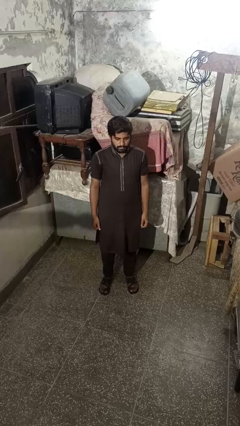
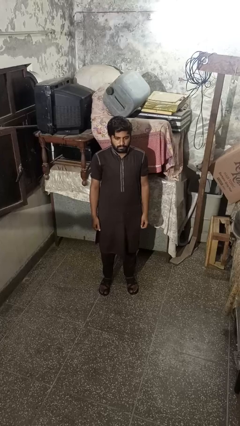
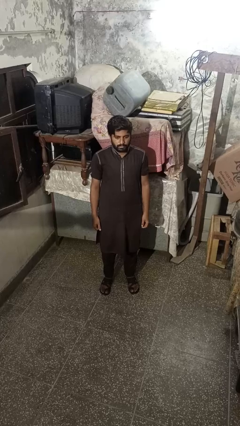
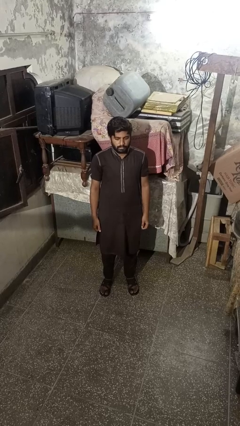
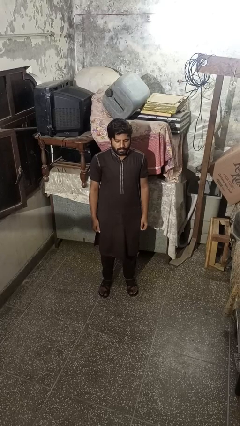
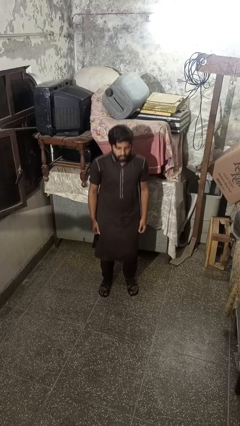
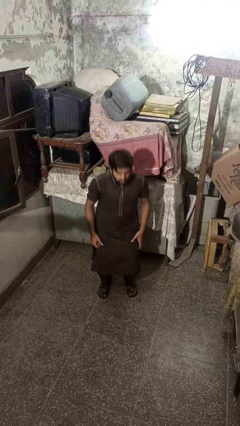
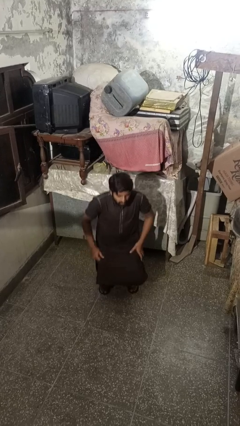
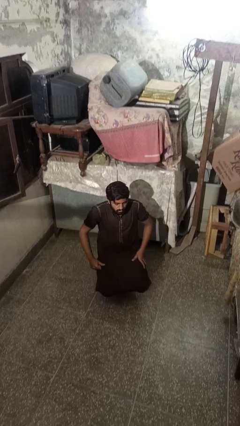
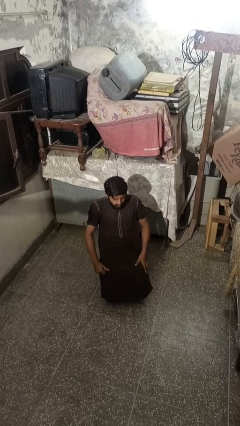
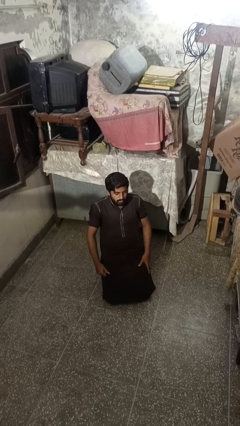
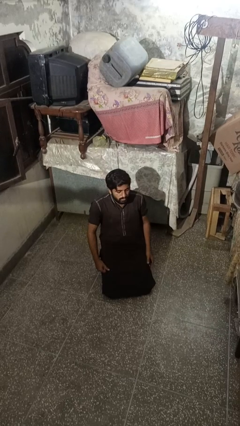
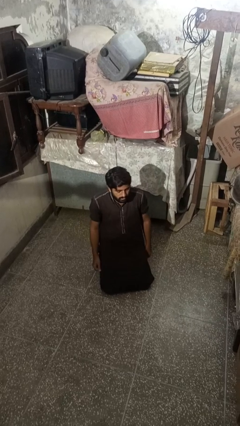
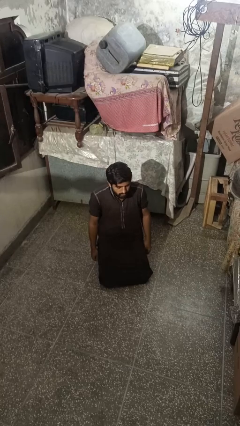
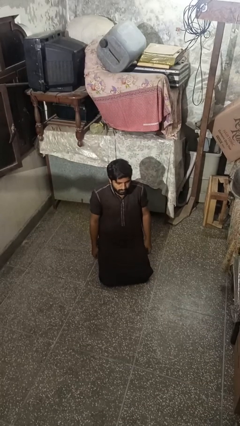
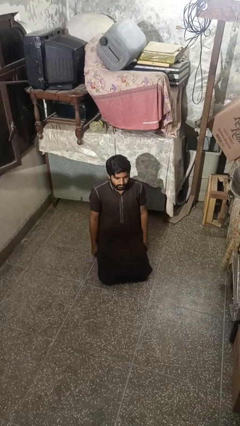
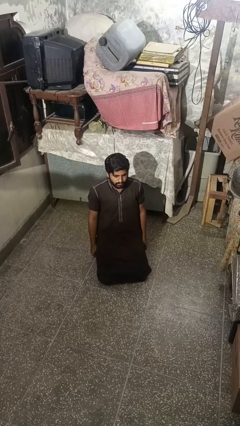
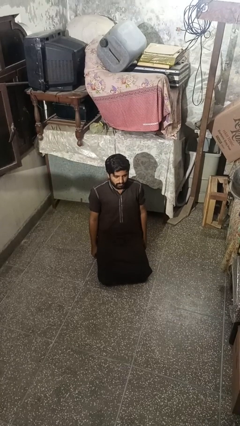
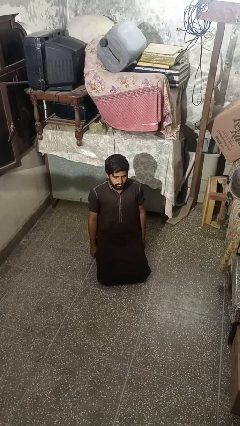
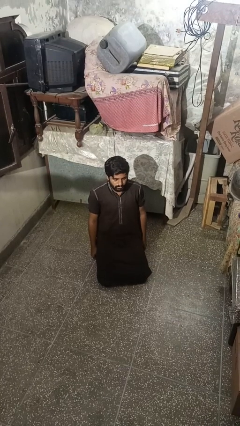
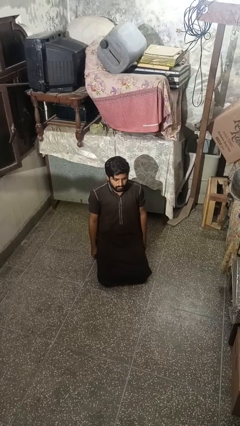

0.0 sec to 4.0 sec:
person kneels

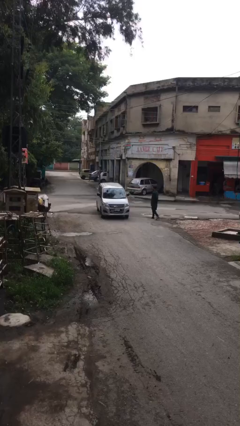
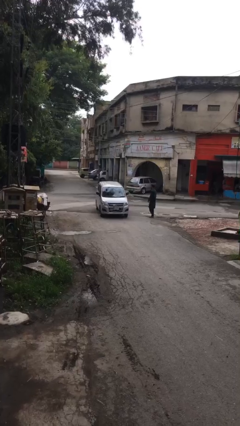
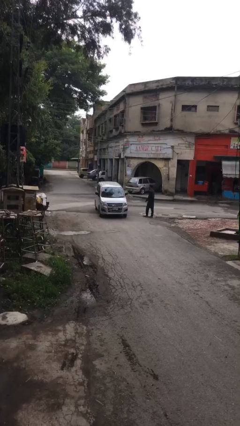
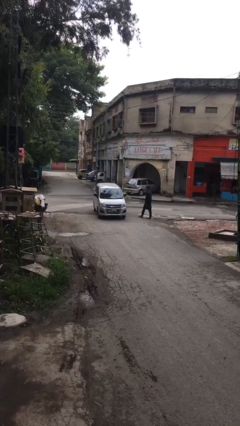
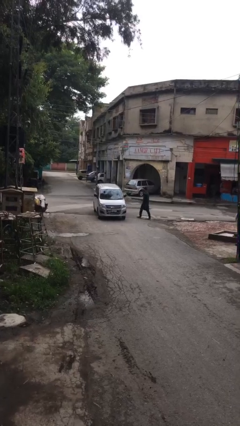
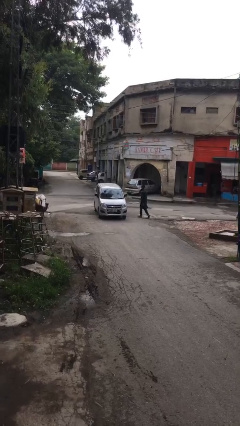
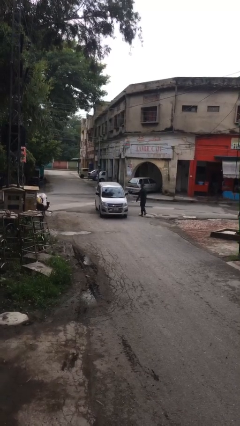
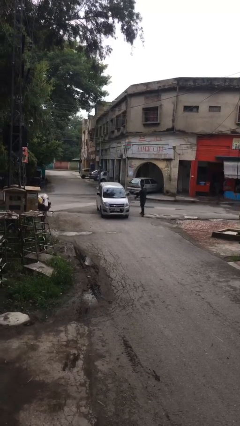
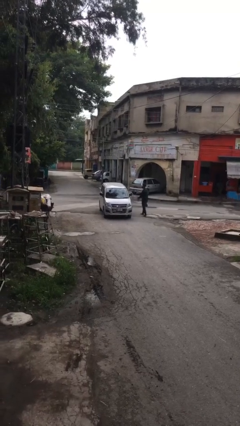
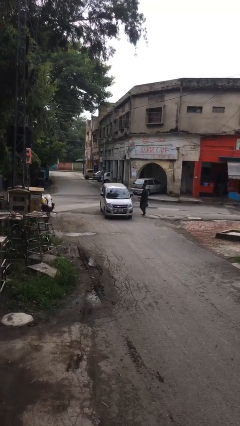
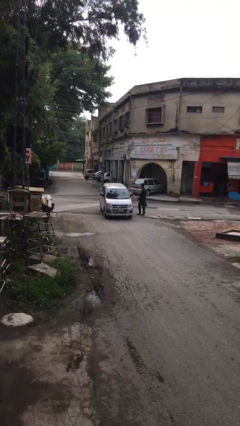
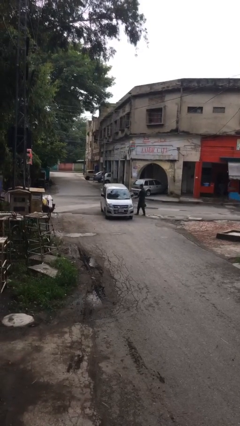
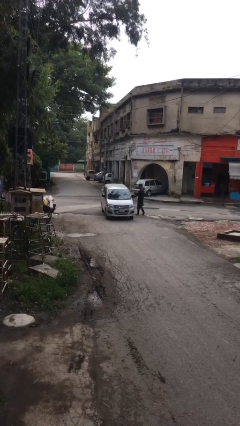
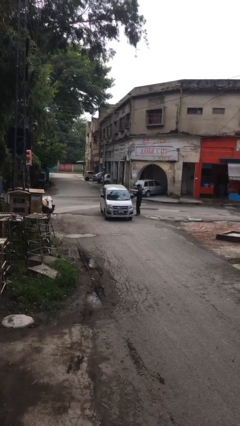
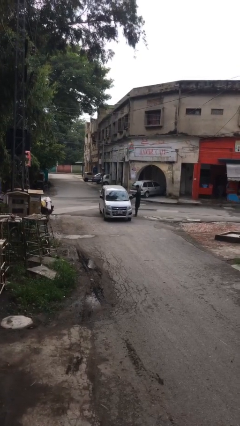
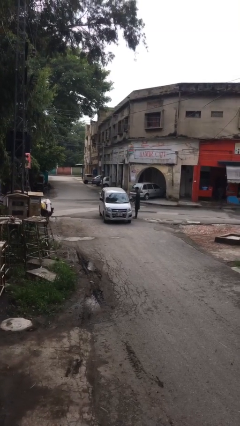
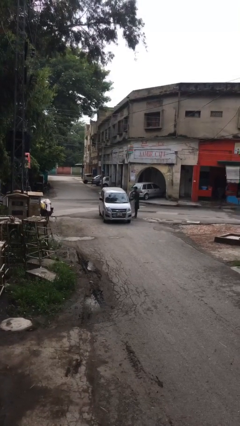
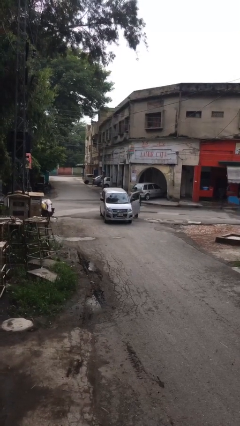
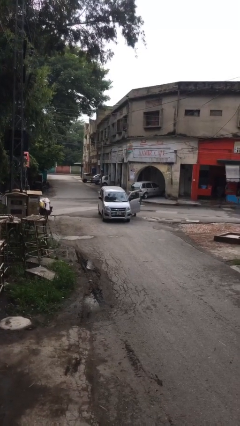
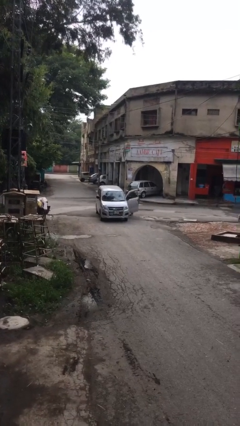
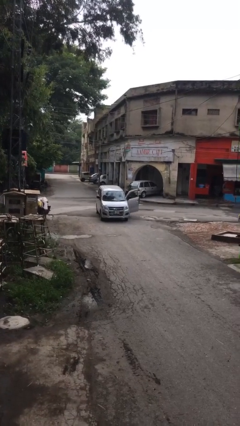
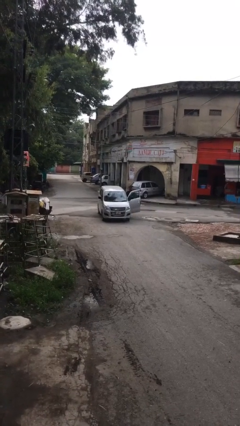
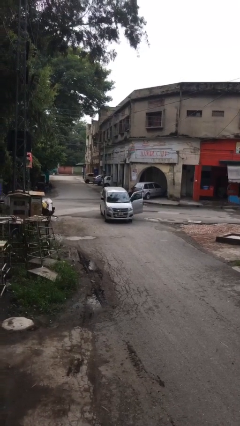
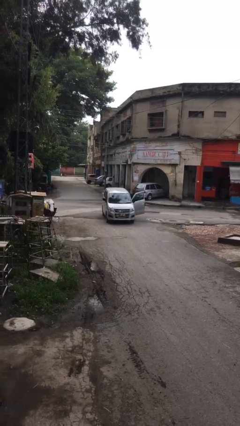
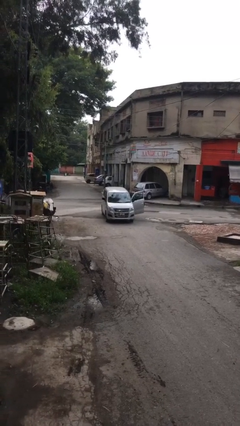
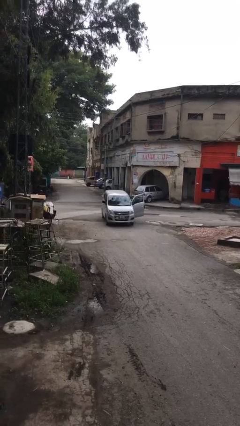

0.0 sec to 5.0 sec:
car picks up person

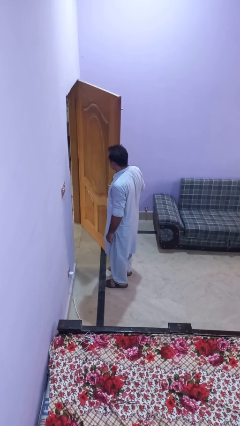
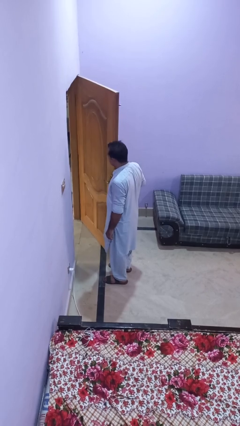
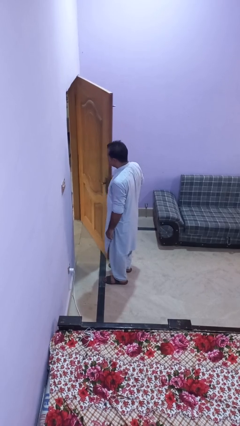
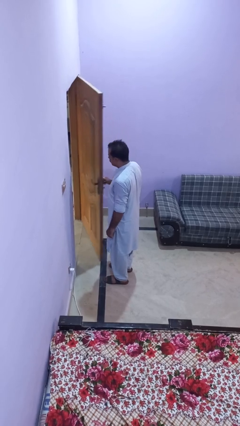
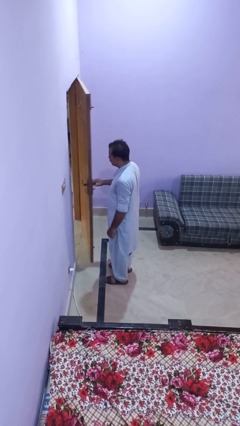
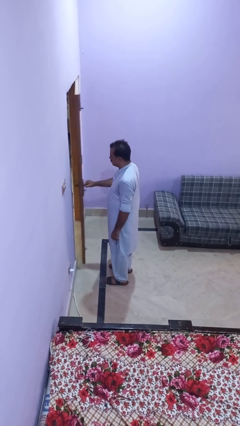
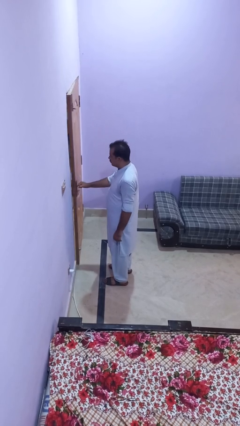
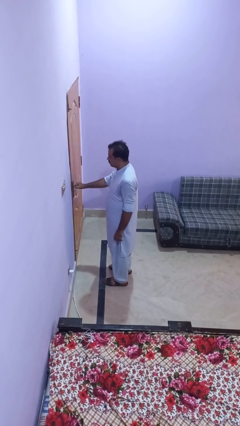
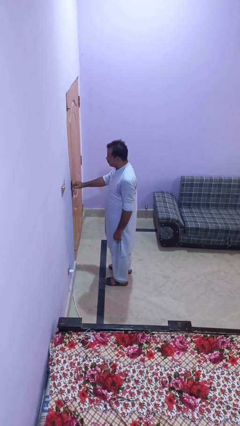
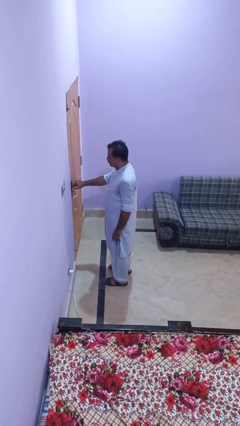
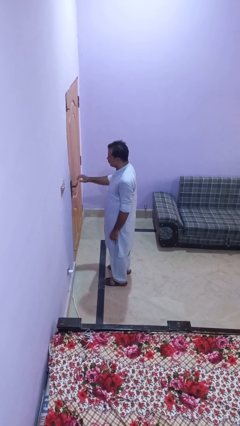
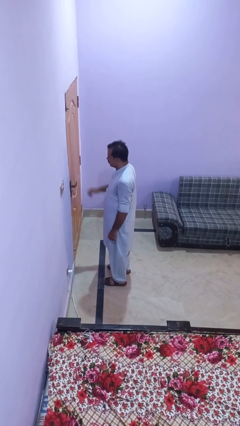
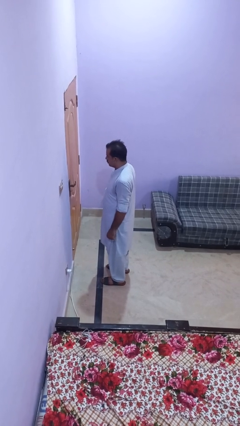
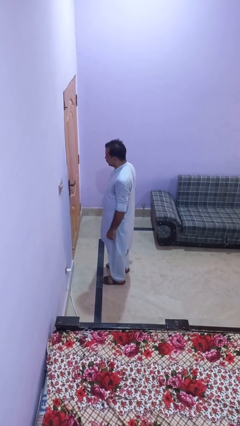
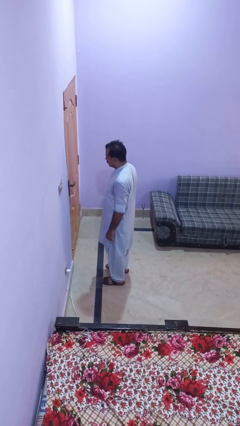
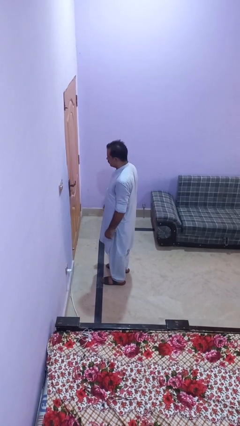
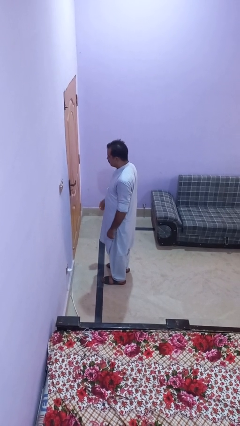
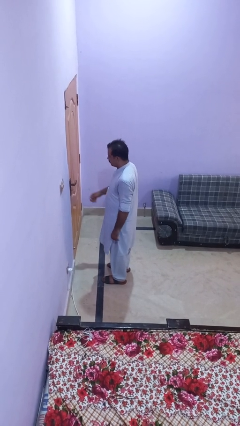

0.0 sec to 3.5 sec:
person closes facility door

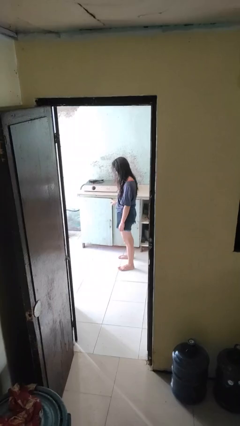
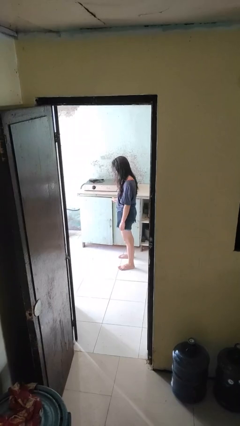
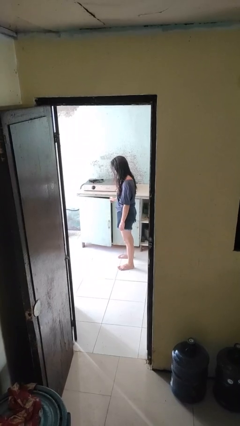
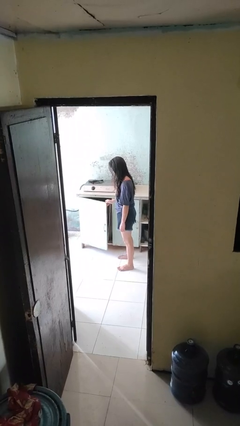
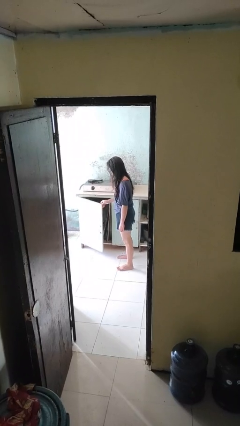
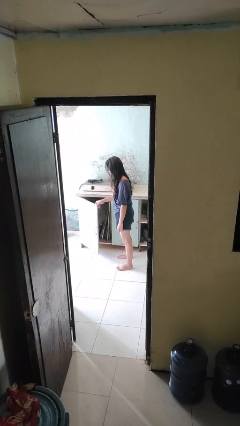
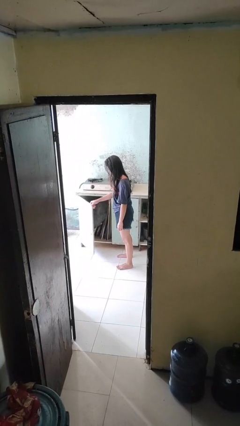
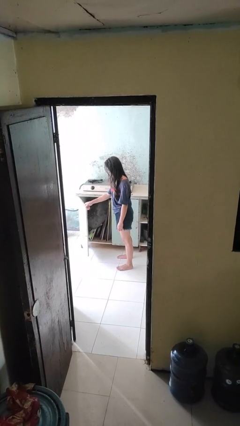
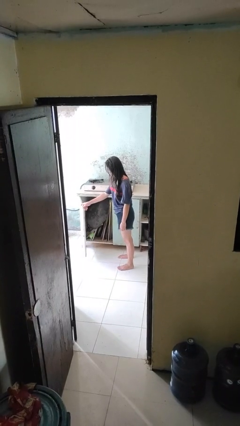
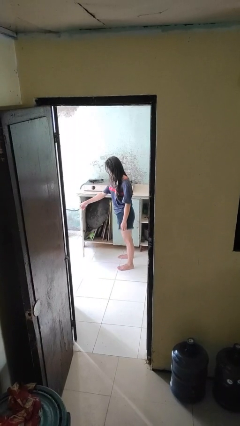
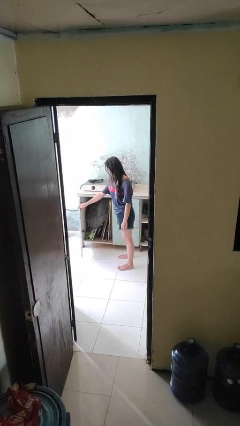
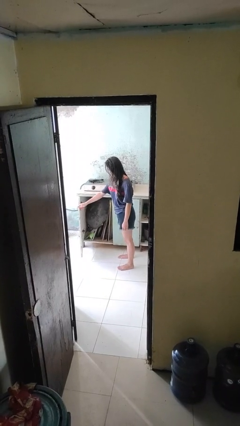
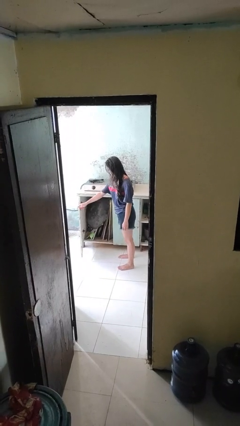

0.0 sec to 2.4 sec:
person opens cabinet

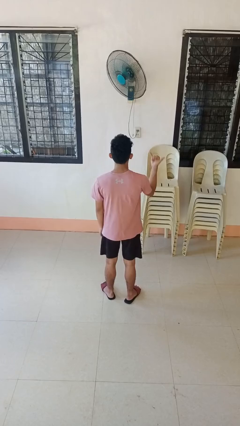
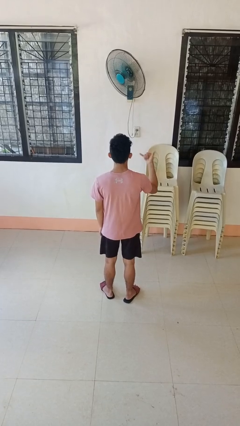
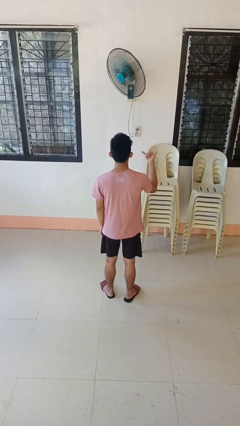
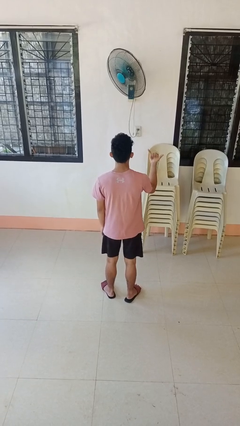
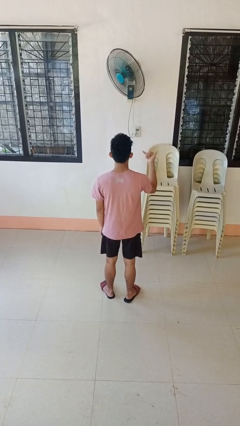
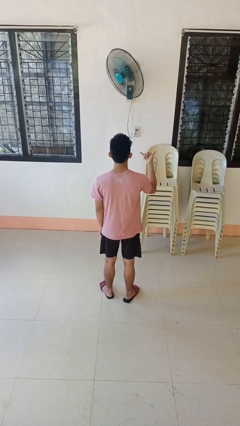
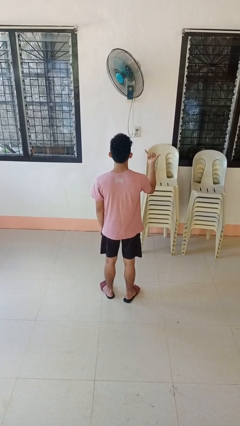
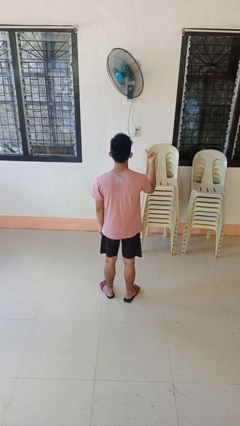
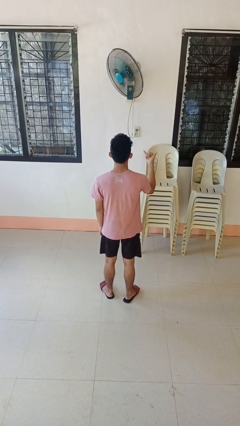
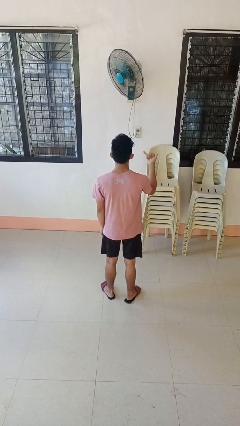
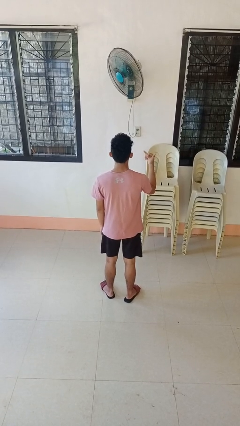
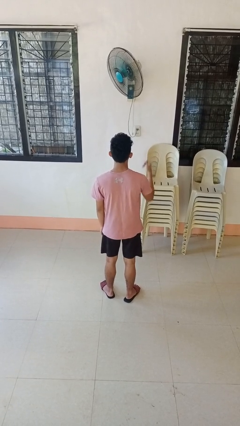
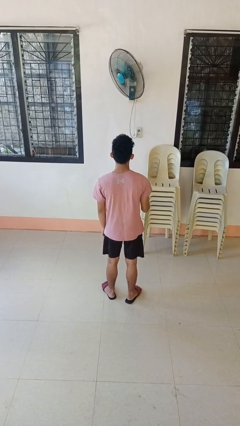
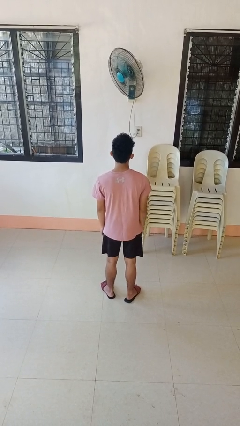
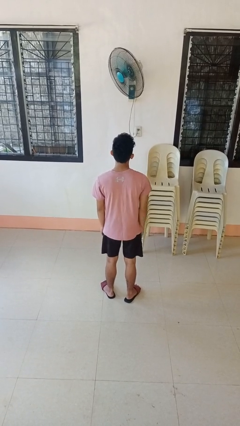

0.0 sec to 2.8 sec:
person gestures hang loose

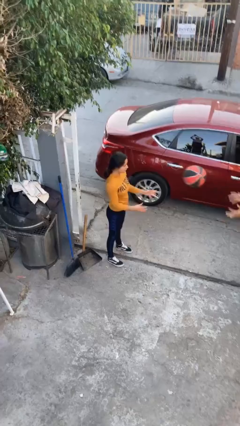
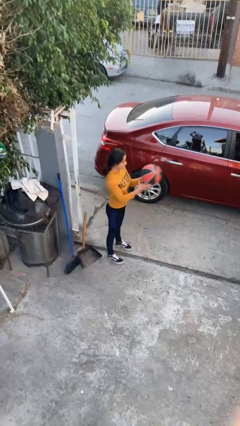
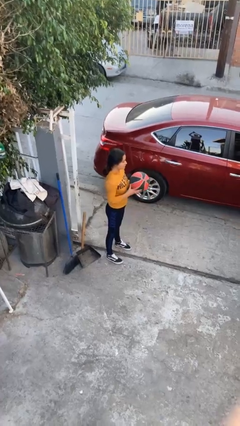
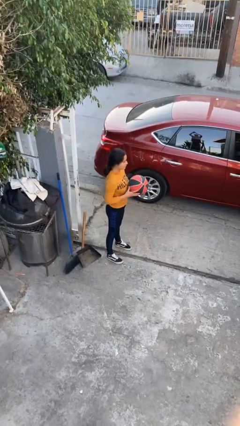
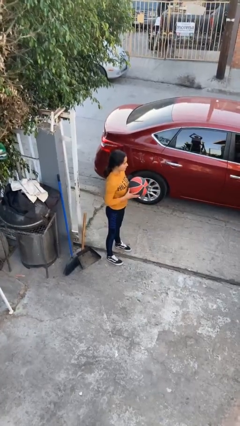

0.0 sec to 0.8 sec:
person catches object from person
